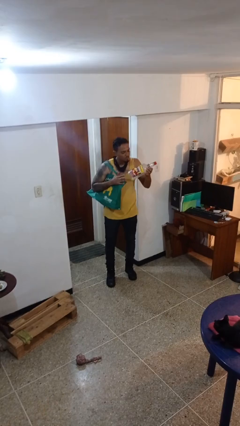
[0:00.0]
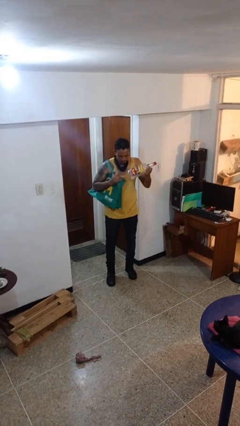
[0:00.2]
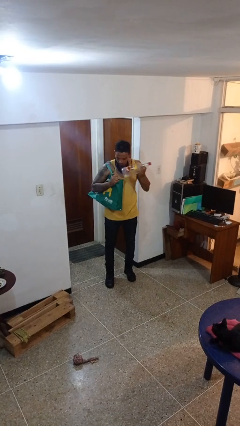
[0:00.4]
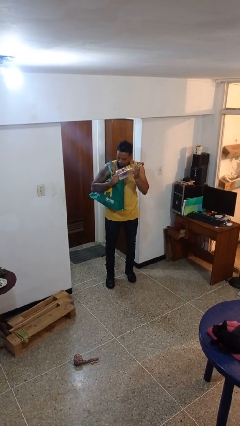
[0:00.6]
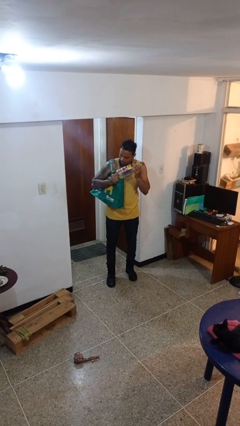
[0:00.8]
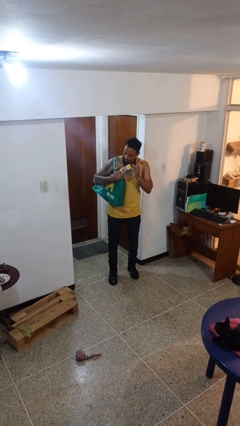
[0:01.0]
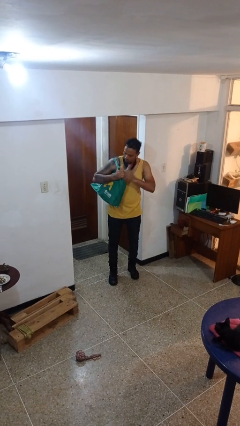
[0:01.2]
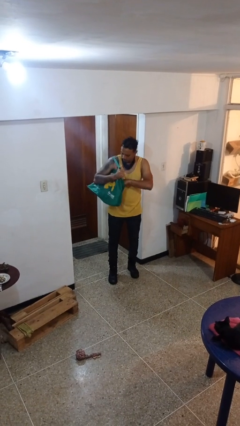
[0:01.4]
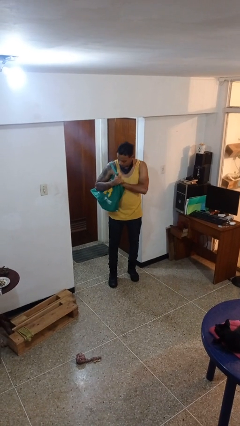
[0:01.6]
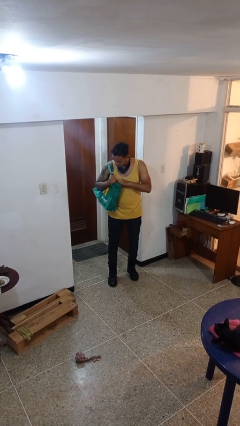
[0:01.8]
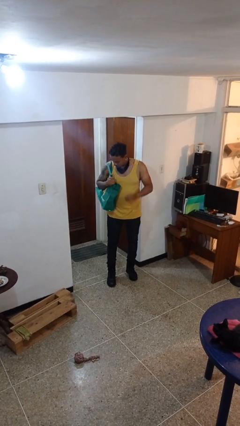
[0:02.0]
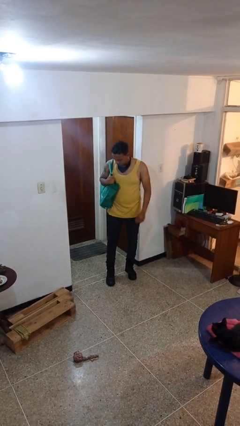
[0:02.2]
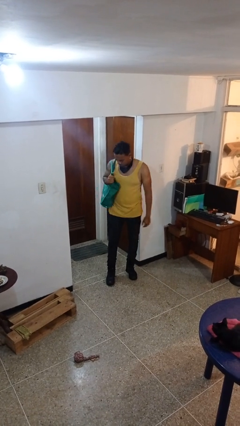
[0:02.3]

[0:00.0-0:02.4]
person puts object into purse

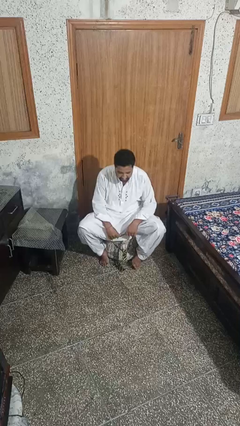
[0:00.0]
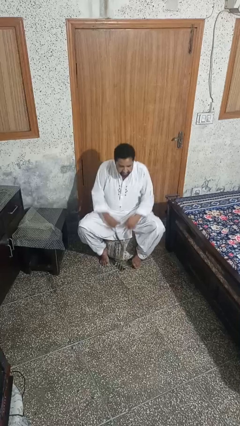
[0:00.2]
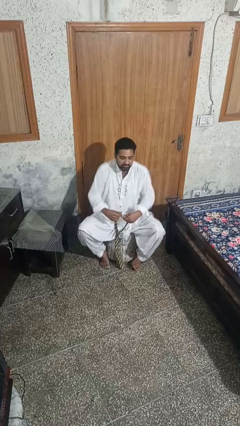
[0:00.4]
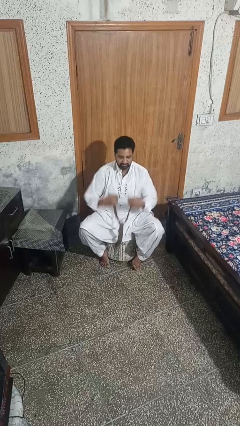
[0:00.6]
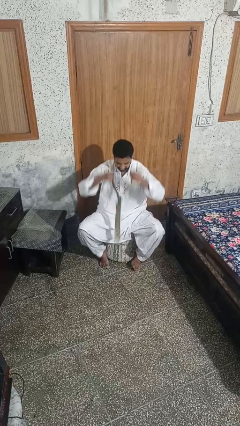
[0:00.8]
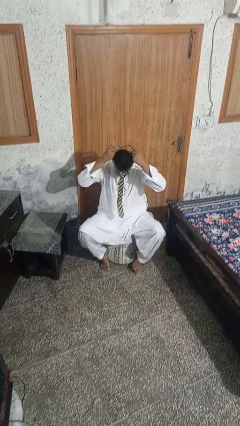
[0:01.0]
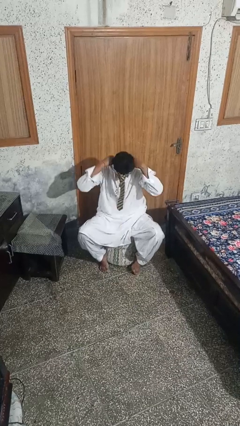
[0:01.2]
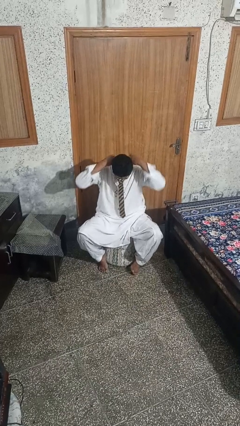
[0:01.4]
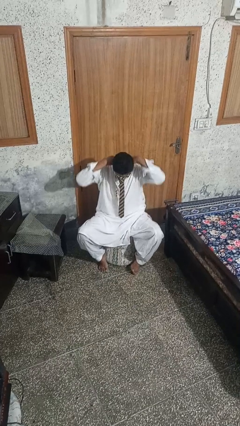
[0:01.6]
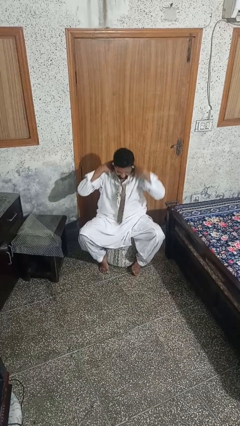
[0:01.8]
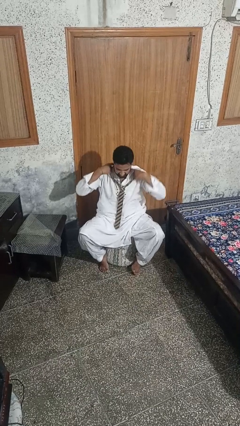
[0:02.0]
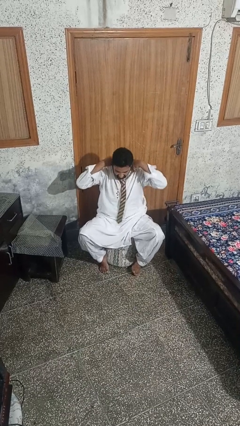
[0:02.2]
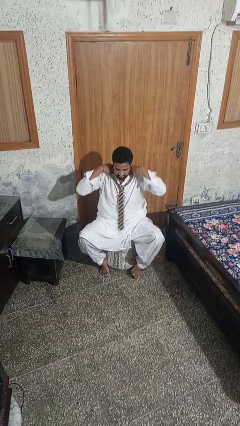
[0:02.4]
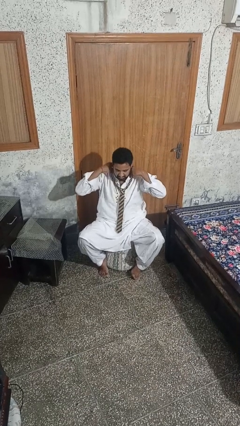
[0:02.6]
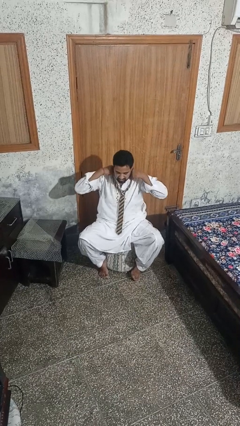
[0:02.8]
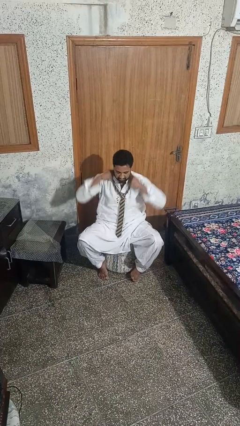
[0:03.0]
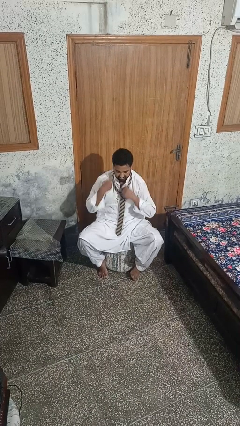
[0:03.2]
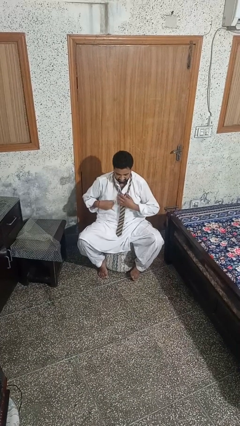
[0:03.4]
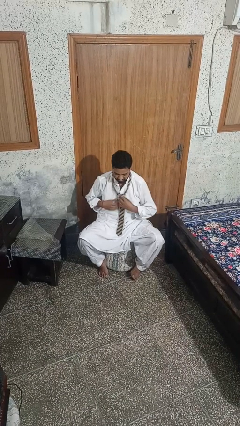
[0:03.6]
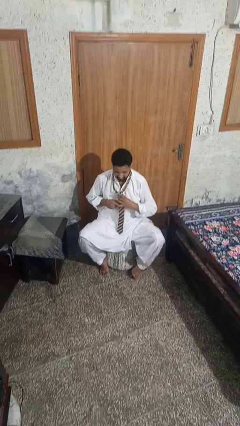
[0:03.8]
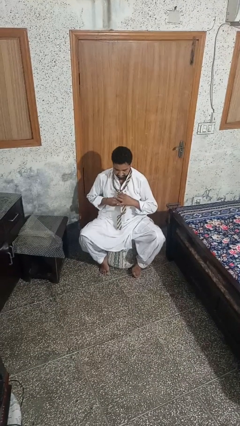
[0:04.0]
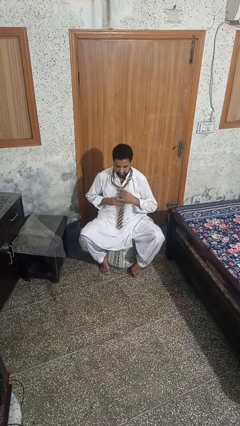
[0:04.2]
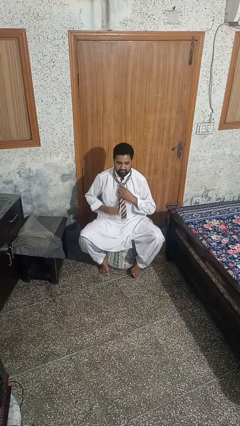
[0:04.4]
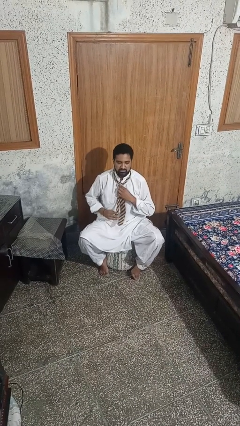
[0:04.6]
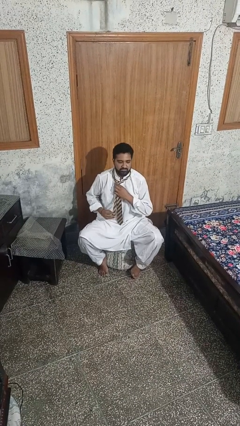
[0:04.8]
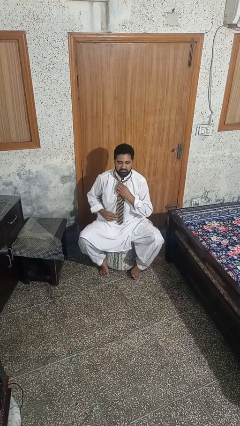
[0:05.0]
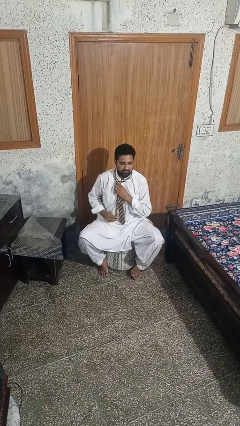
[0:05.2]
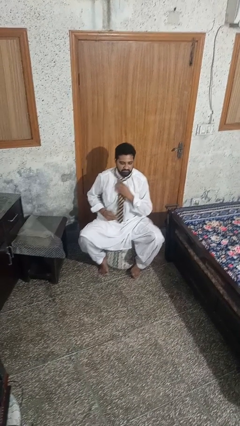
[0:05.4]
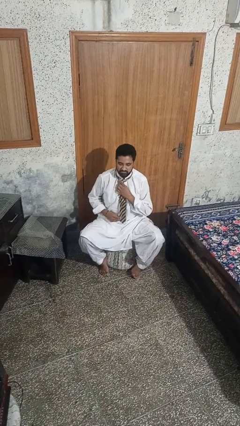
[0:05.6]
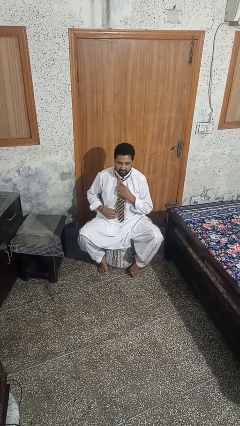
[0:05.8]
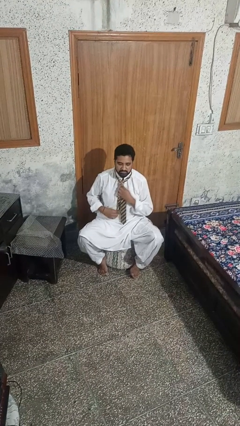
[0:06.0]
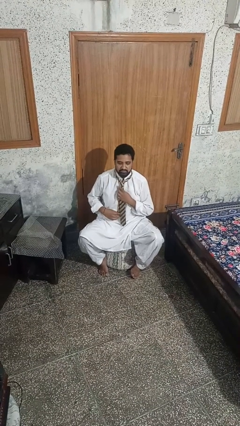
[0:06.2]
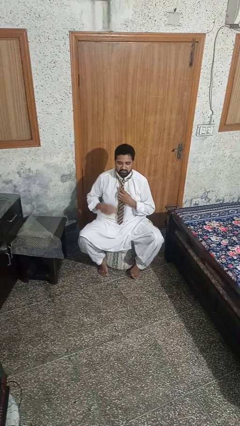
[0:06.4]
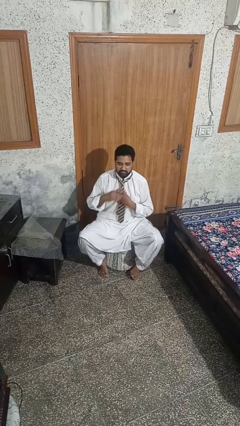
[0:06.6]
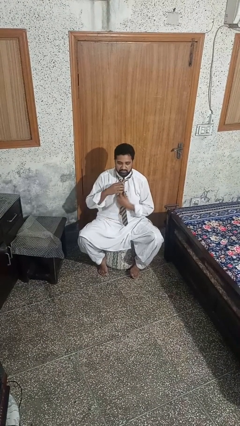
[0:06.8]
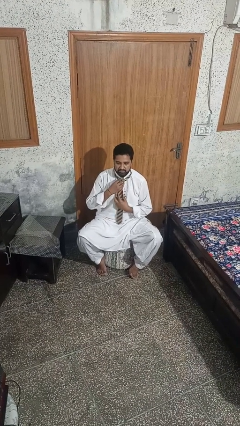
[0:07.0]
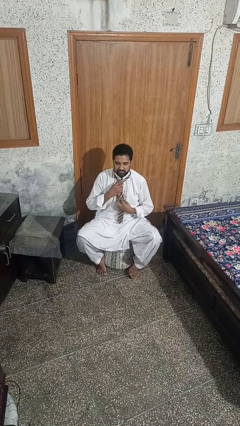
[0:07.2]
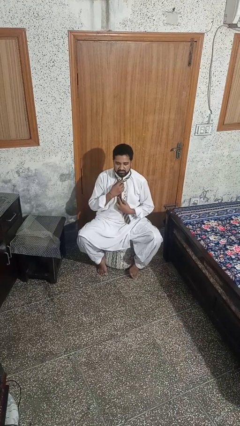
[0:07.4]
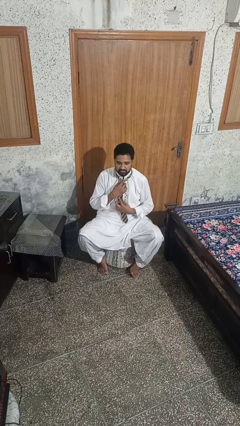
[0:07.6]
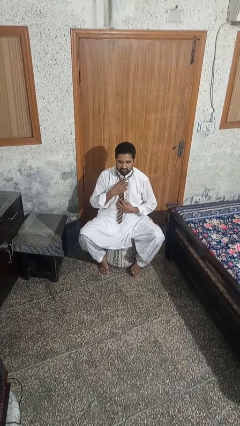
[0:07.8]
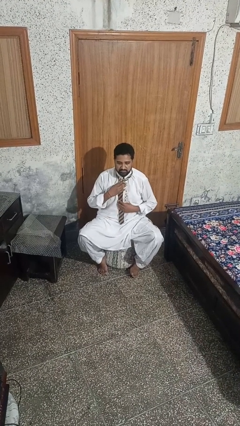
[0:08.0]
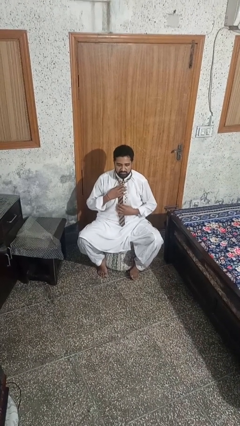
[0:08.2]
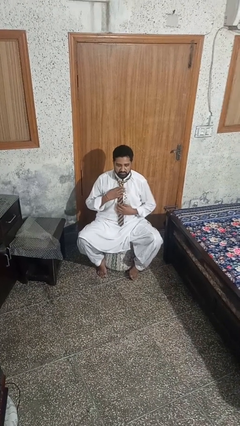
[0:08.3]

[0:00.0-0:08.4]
person puts on necktie

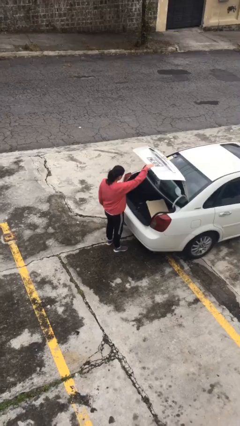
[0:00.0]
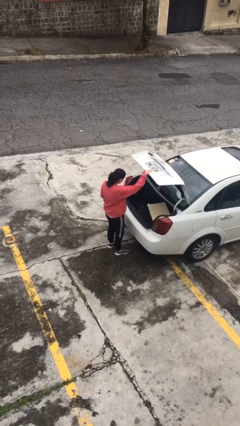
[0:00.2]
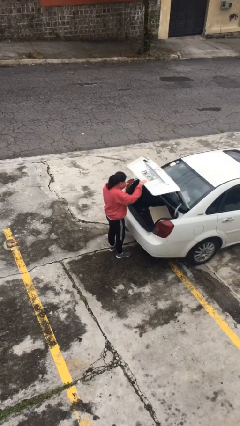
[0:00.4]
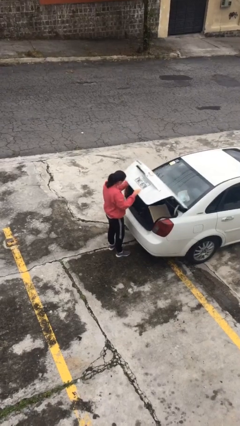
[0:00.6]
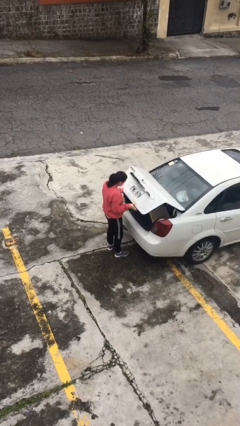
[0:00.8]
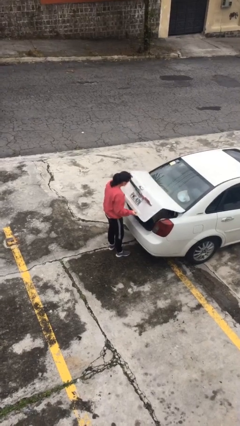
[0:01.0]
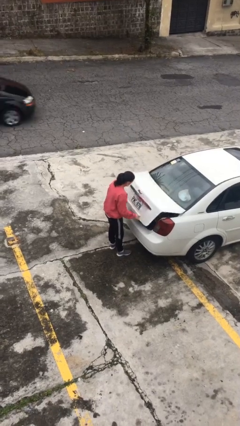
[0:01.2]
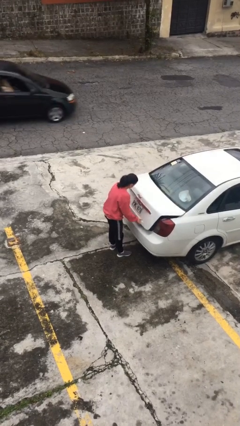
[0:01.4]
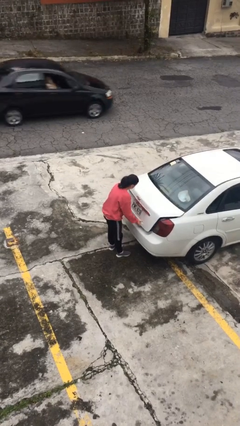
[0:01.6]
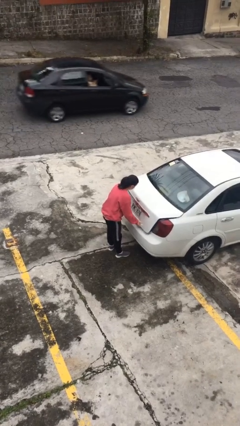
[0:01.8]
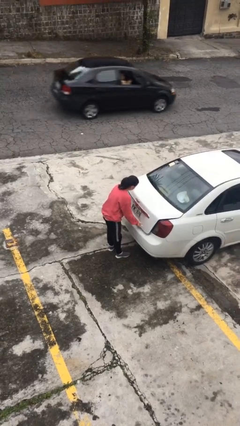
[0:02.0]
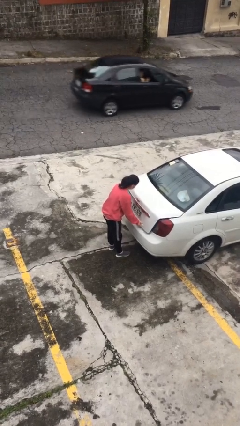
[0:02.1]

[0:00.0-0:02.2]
person closes car trunk

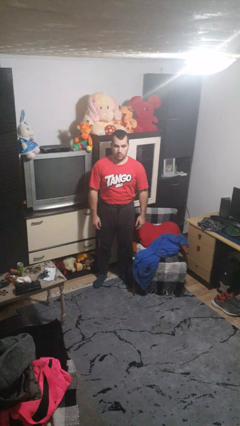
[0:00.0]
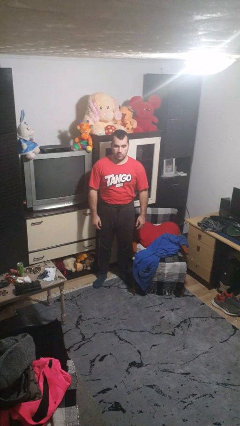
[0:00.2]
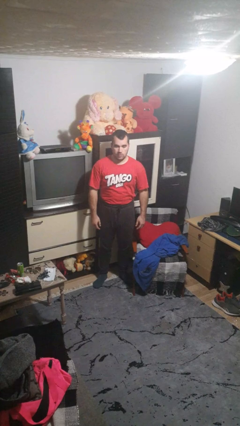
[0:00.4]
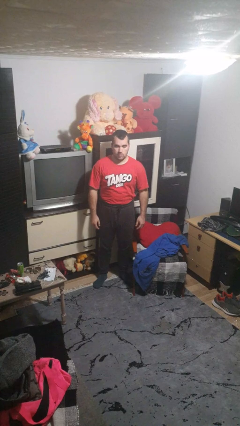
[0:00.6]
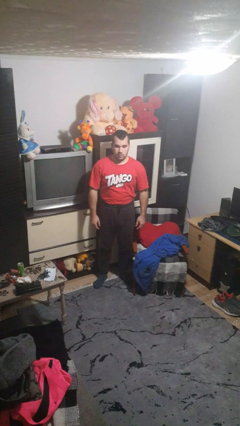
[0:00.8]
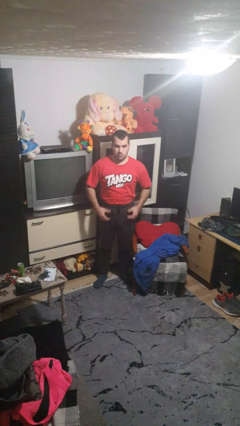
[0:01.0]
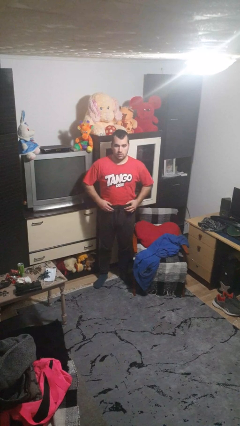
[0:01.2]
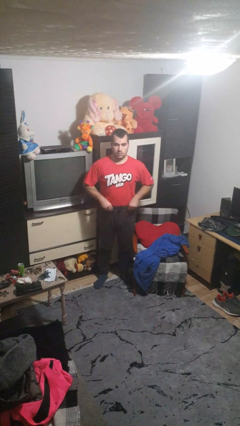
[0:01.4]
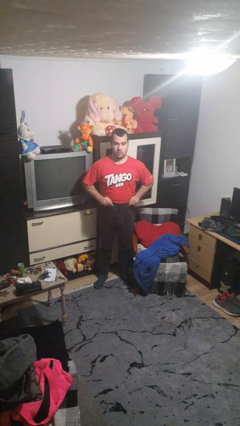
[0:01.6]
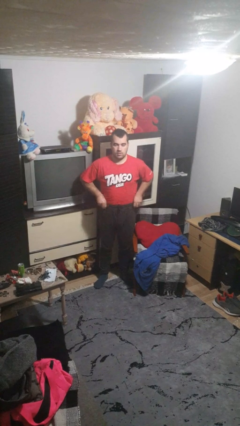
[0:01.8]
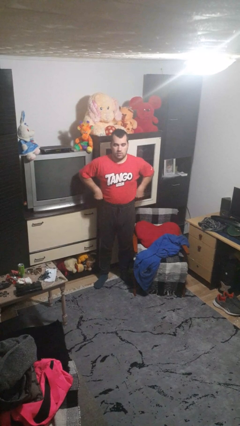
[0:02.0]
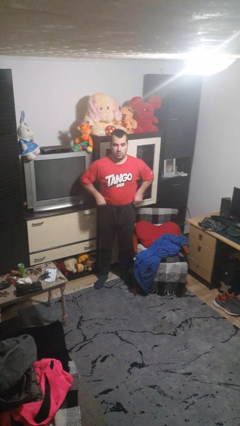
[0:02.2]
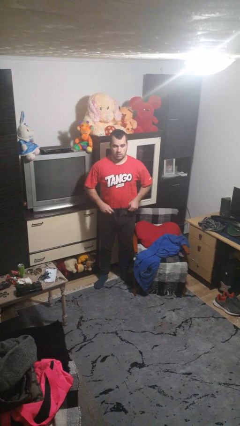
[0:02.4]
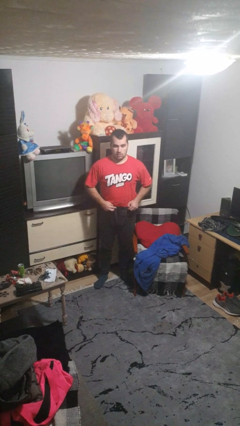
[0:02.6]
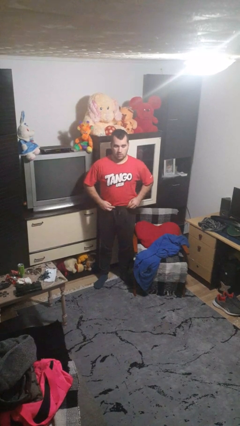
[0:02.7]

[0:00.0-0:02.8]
person hikes up pants

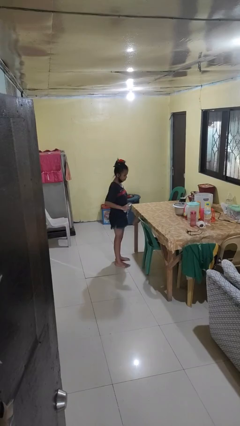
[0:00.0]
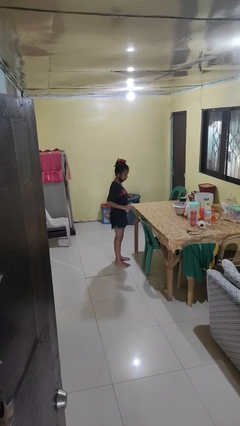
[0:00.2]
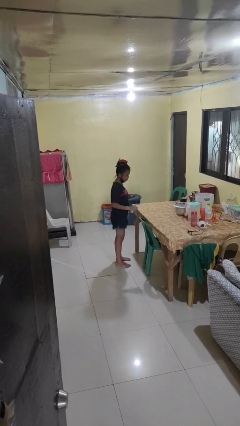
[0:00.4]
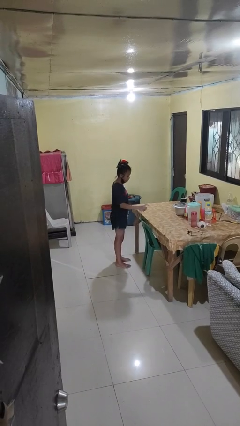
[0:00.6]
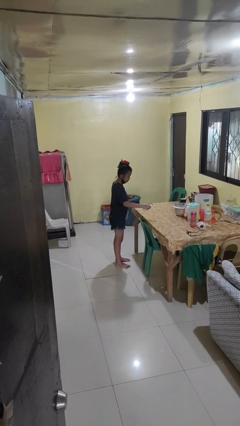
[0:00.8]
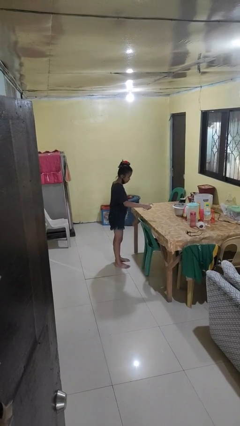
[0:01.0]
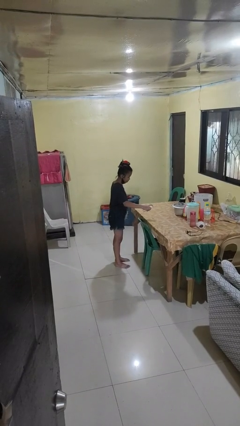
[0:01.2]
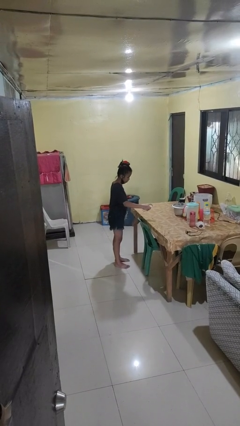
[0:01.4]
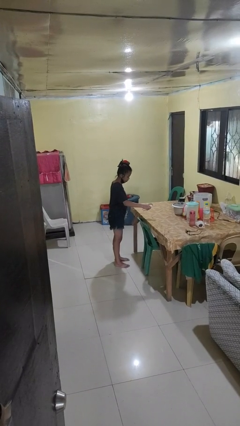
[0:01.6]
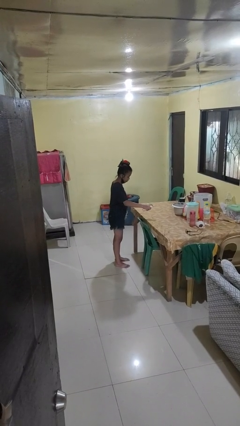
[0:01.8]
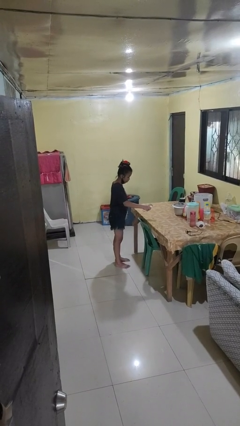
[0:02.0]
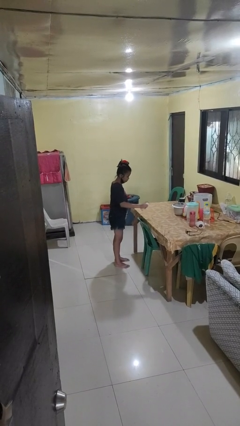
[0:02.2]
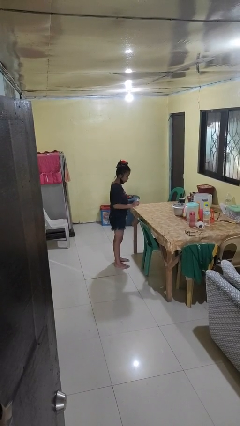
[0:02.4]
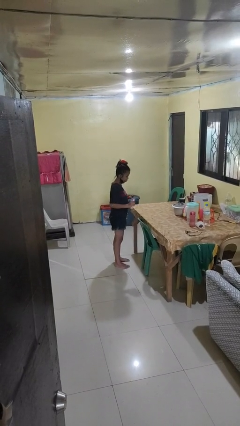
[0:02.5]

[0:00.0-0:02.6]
person sprays from bottle
